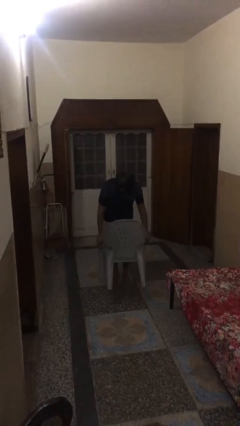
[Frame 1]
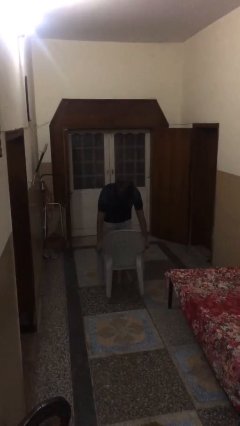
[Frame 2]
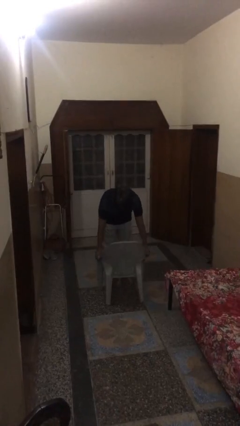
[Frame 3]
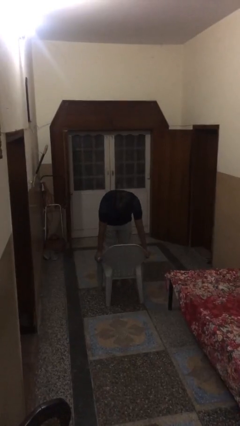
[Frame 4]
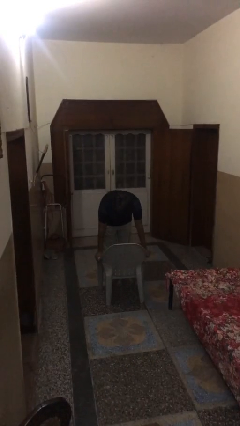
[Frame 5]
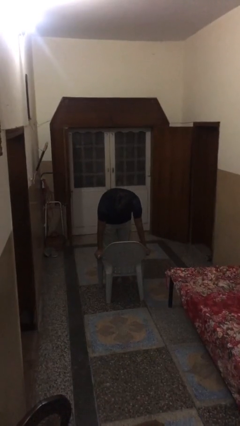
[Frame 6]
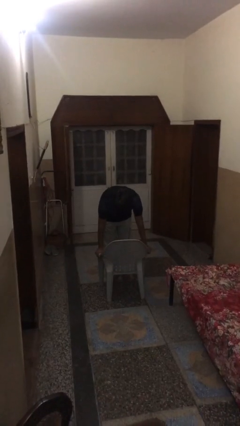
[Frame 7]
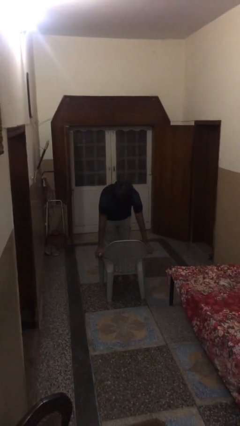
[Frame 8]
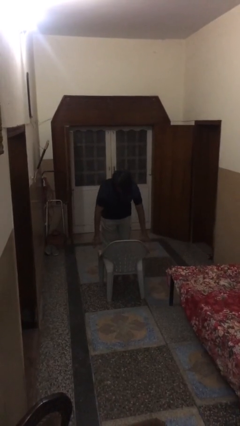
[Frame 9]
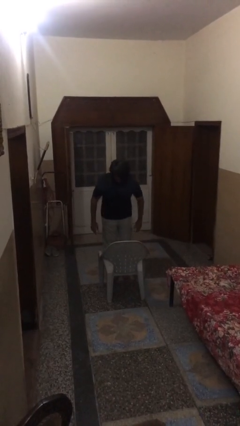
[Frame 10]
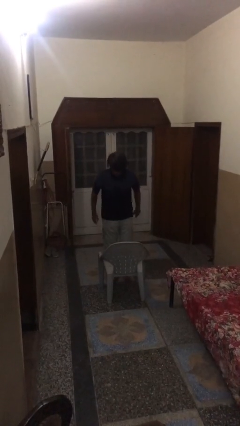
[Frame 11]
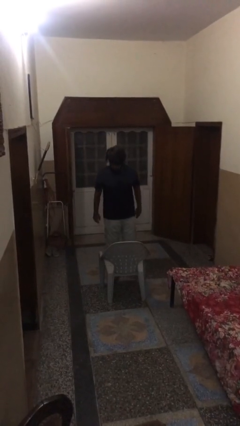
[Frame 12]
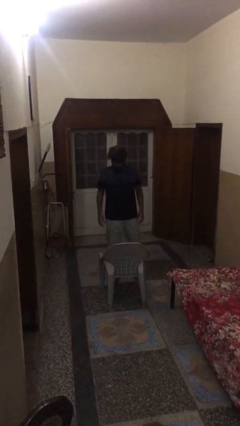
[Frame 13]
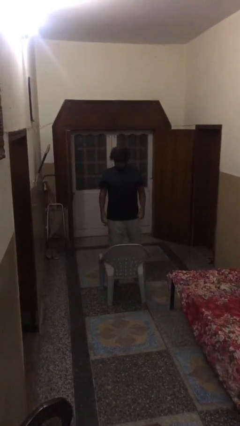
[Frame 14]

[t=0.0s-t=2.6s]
person puts down object on floor

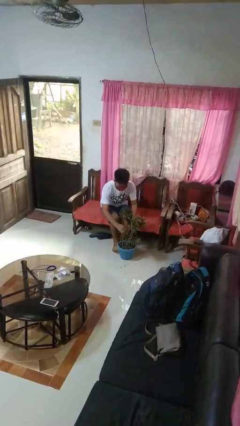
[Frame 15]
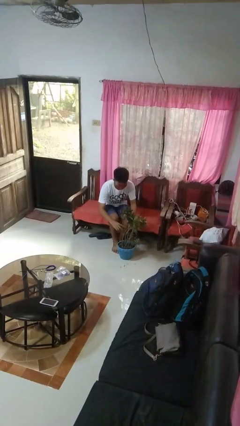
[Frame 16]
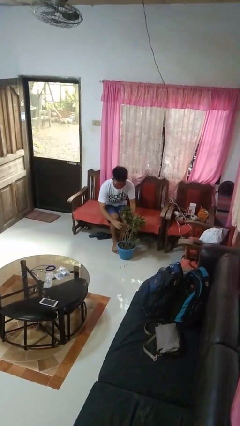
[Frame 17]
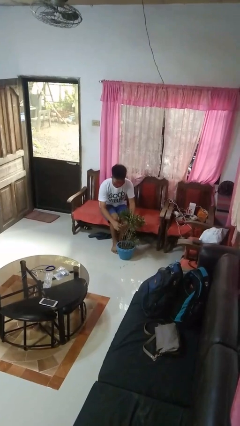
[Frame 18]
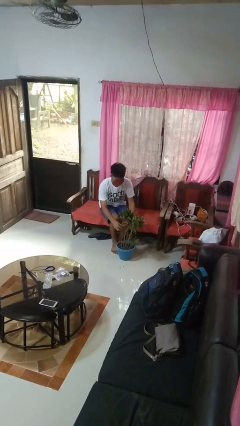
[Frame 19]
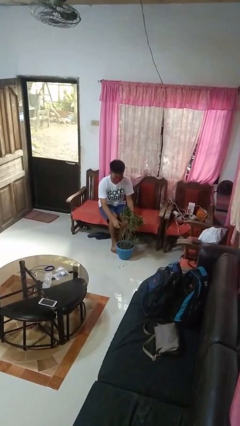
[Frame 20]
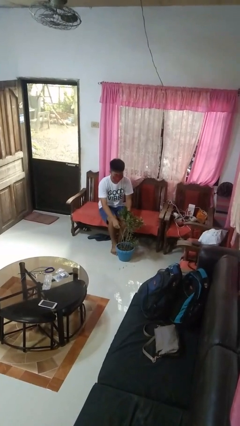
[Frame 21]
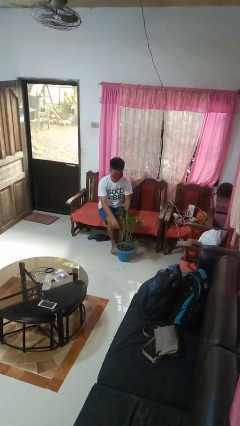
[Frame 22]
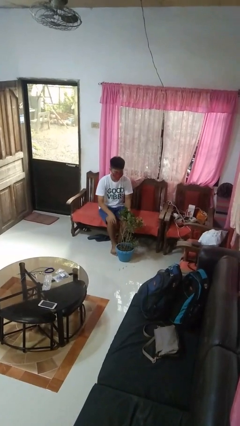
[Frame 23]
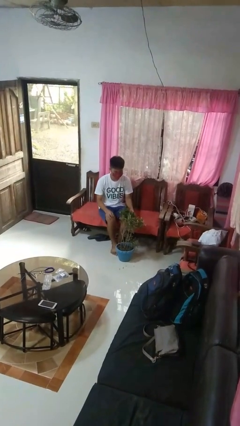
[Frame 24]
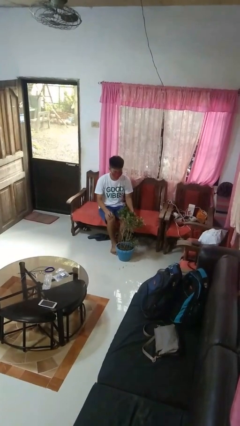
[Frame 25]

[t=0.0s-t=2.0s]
person arranges flowers in vase

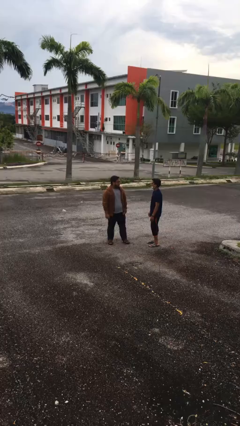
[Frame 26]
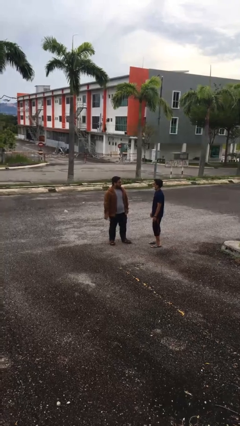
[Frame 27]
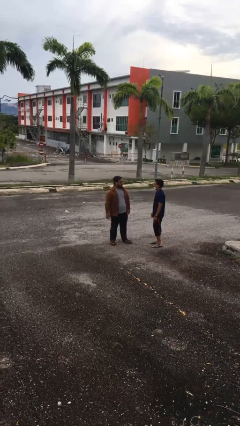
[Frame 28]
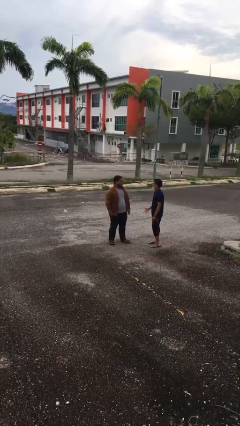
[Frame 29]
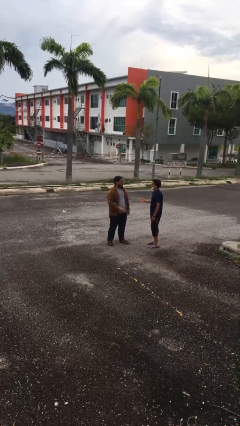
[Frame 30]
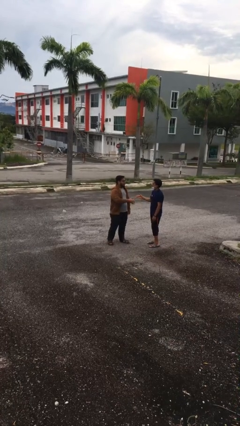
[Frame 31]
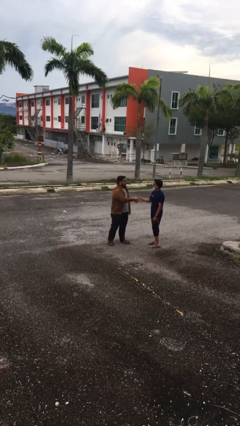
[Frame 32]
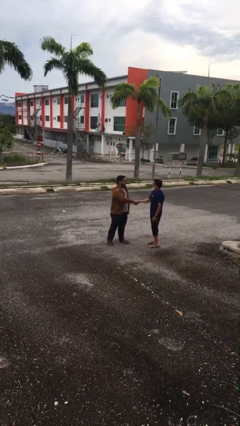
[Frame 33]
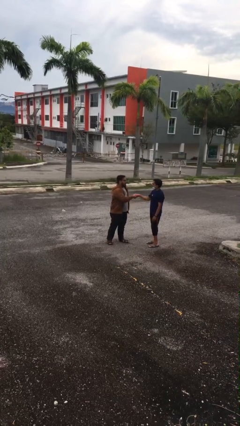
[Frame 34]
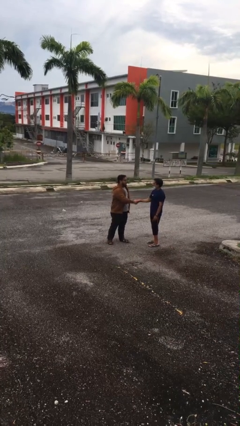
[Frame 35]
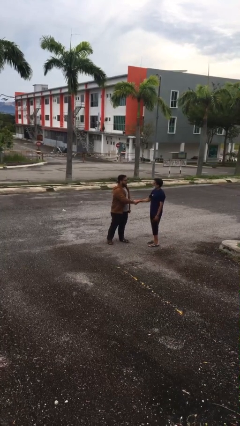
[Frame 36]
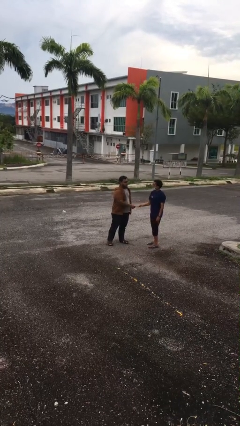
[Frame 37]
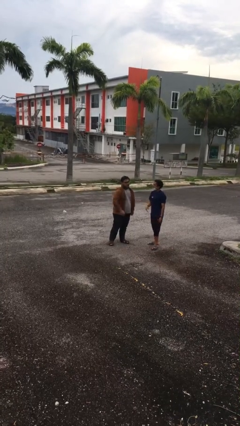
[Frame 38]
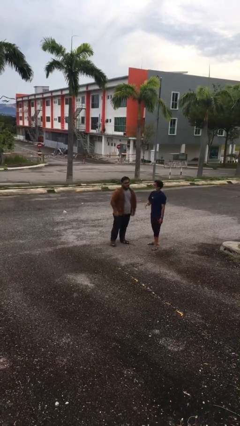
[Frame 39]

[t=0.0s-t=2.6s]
person shakes hand

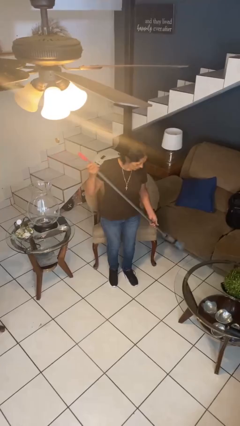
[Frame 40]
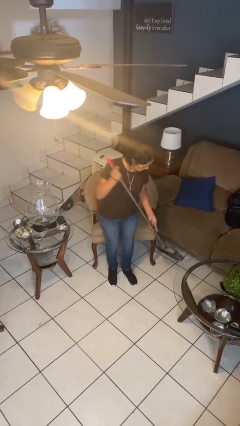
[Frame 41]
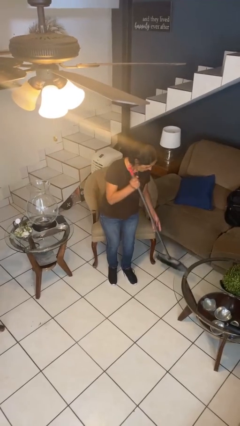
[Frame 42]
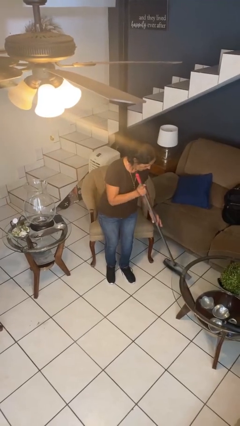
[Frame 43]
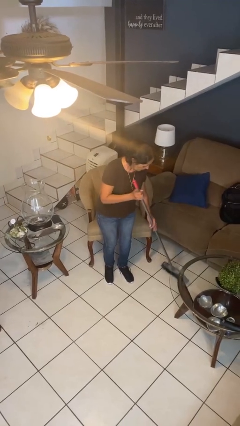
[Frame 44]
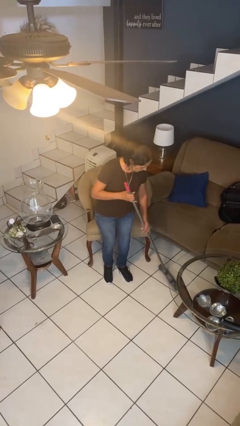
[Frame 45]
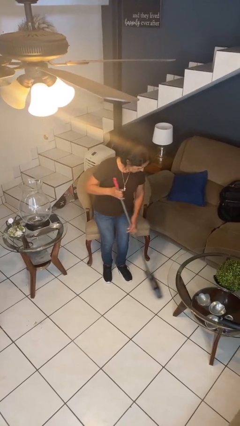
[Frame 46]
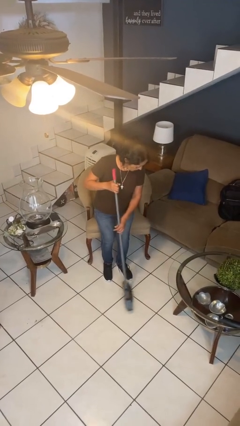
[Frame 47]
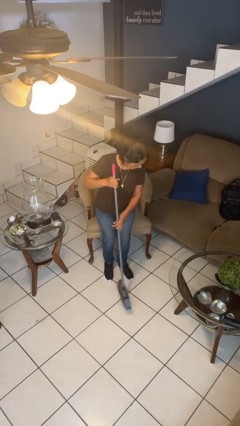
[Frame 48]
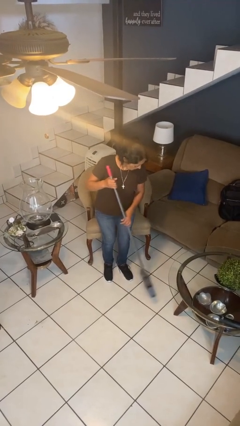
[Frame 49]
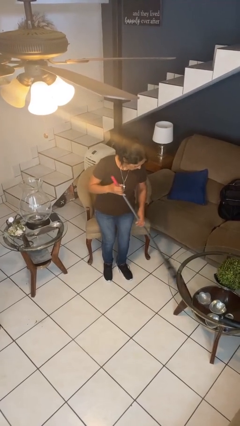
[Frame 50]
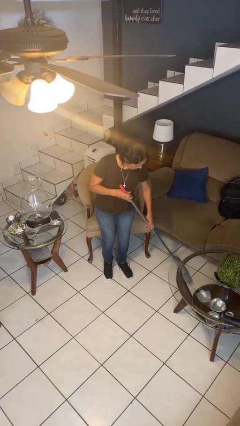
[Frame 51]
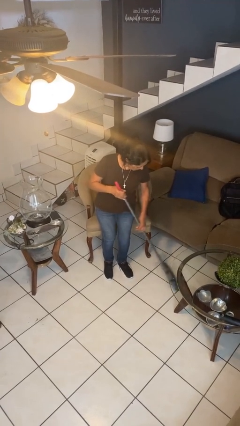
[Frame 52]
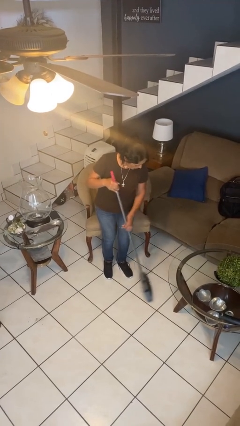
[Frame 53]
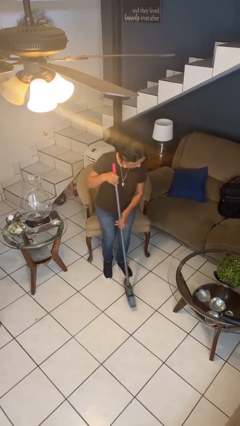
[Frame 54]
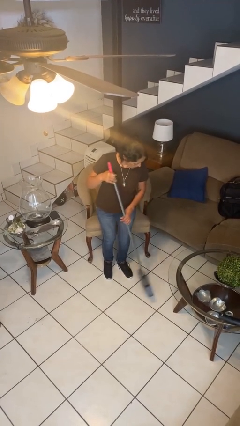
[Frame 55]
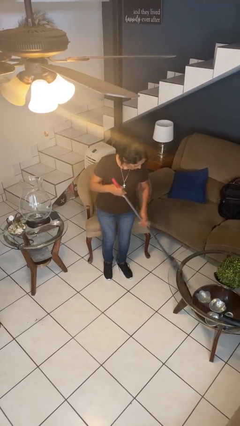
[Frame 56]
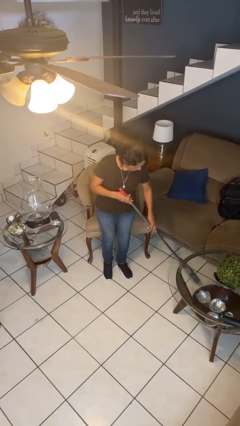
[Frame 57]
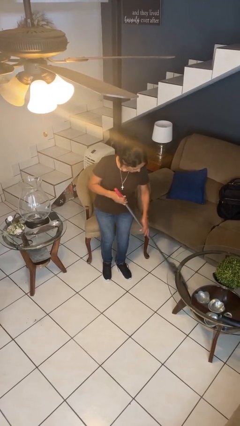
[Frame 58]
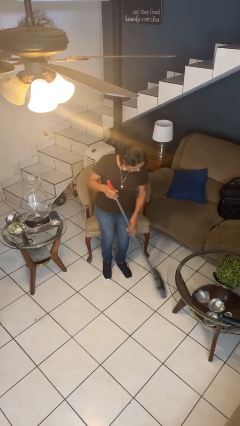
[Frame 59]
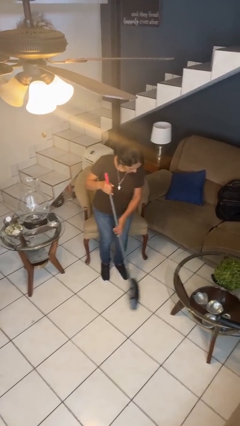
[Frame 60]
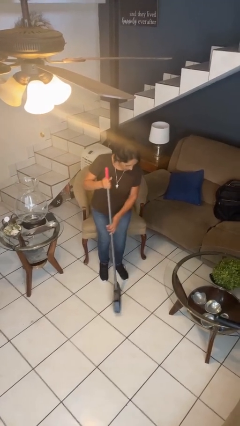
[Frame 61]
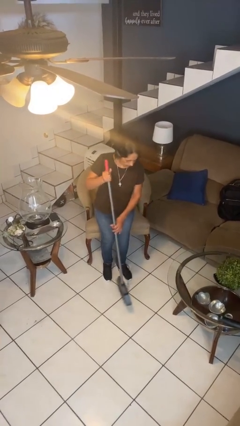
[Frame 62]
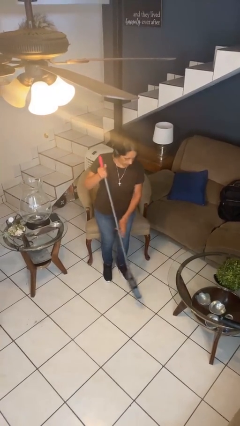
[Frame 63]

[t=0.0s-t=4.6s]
person sweeps floor

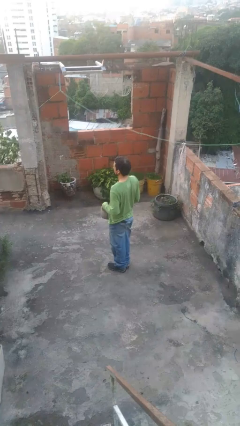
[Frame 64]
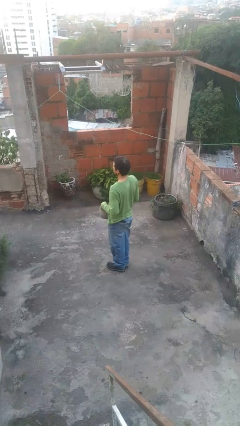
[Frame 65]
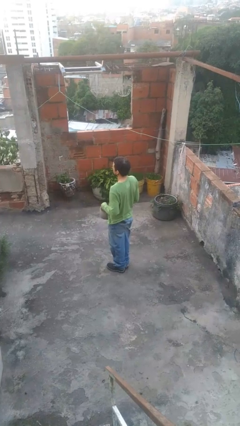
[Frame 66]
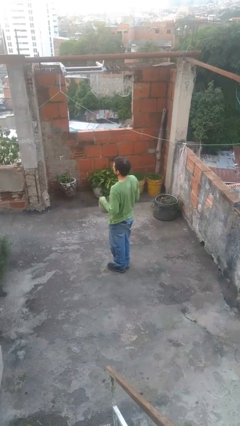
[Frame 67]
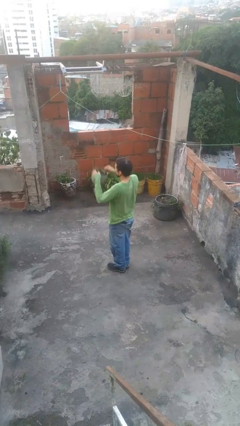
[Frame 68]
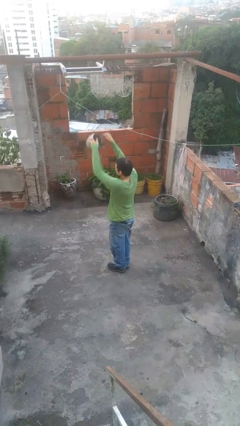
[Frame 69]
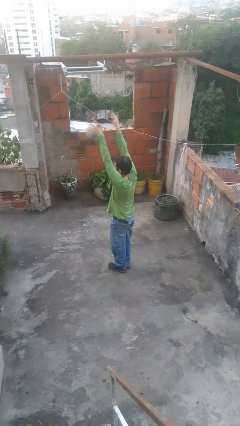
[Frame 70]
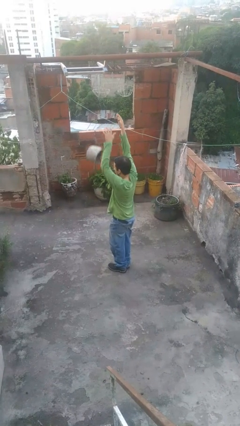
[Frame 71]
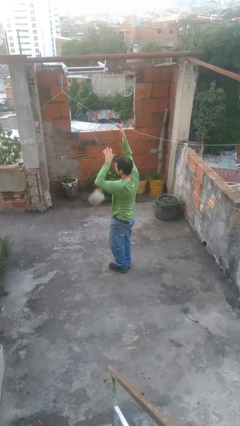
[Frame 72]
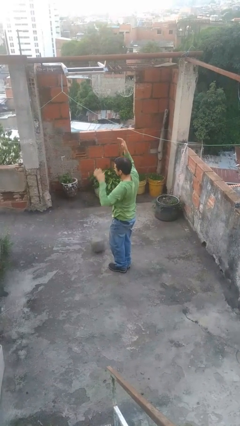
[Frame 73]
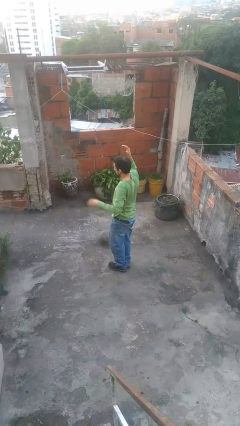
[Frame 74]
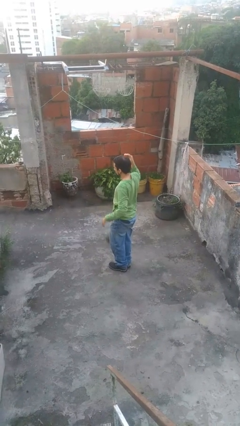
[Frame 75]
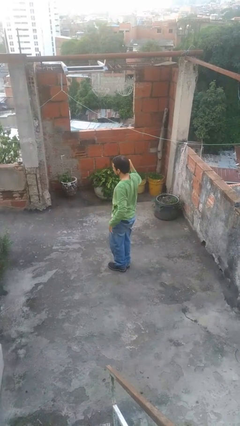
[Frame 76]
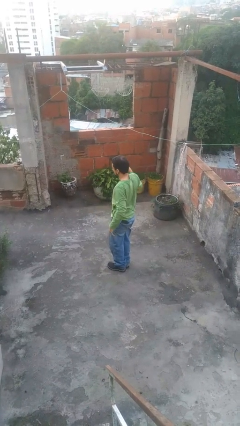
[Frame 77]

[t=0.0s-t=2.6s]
person throws object into air

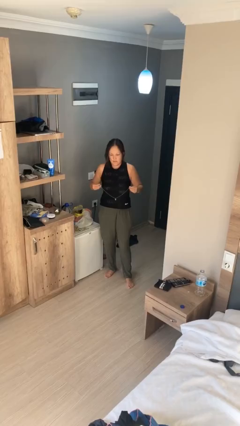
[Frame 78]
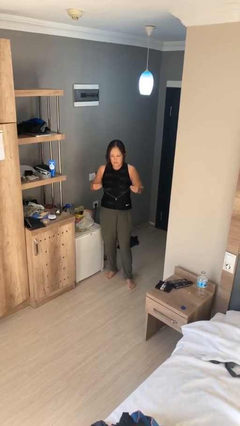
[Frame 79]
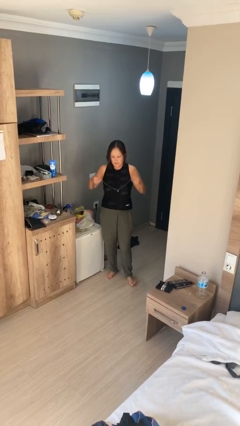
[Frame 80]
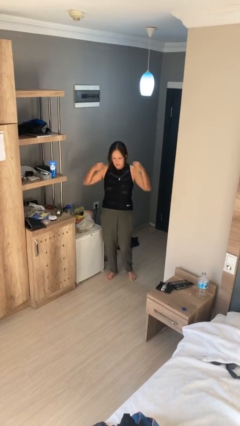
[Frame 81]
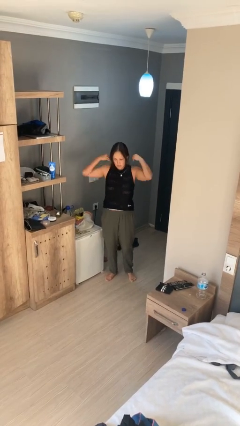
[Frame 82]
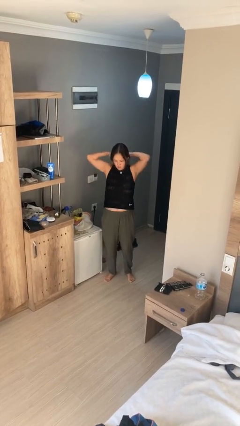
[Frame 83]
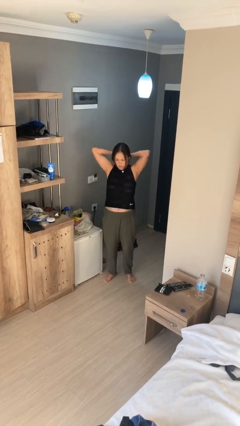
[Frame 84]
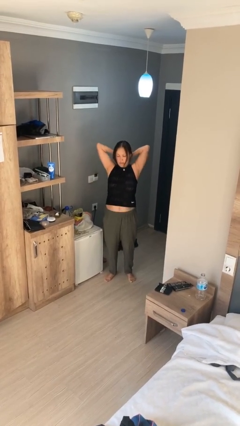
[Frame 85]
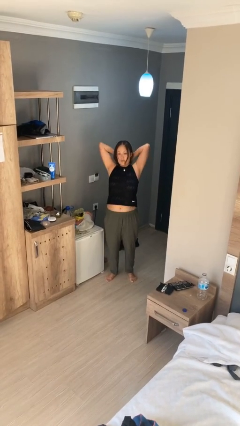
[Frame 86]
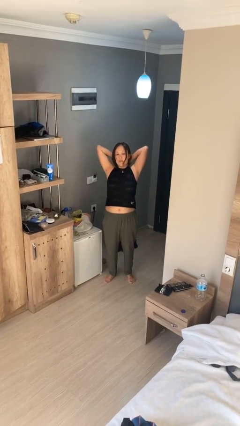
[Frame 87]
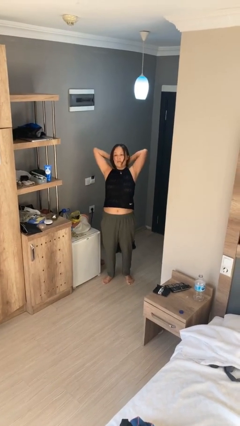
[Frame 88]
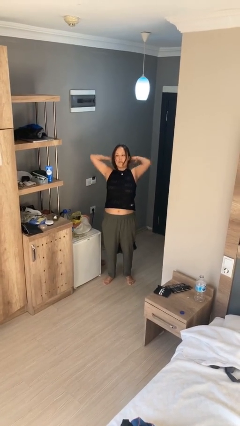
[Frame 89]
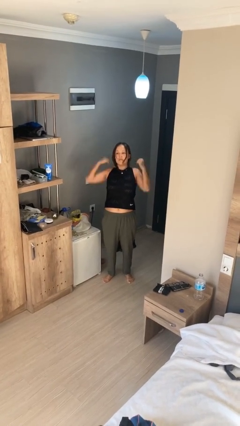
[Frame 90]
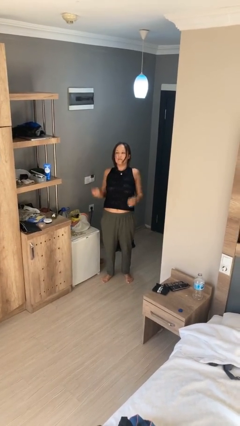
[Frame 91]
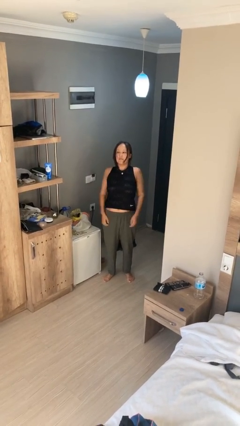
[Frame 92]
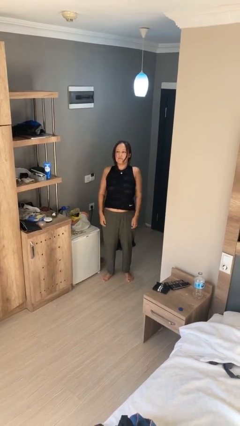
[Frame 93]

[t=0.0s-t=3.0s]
person puts on necklace
